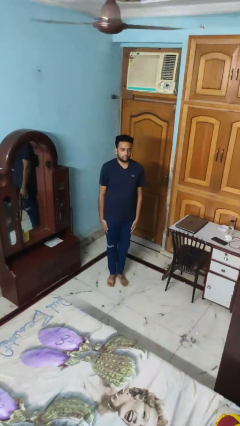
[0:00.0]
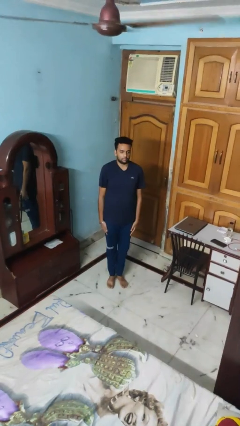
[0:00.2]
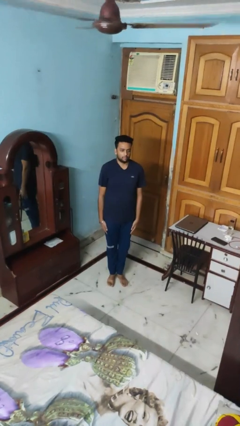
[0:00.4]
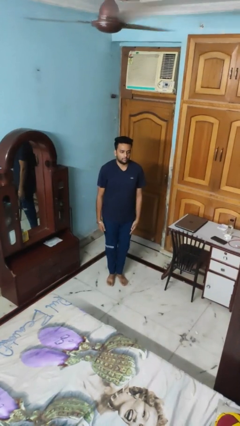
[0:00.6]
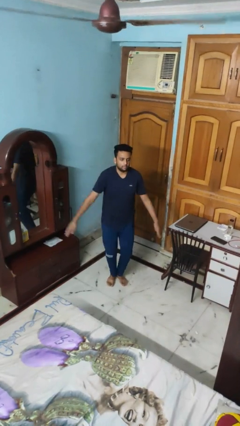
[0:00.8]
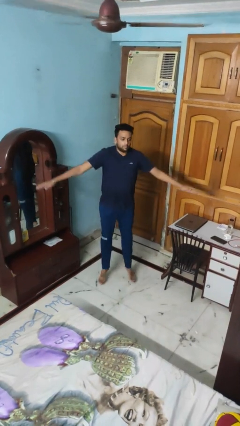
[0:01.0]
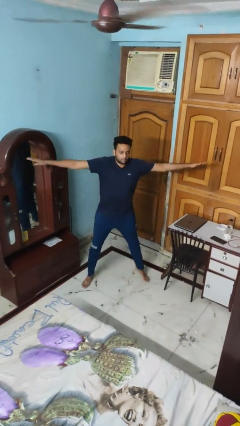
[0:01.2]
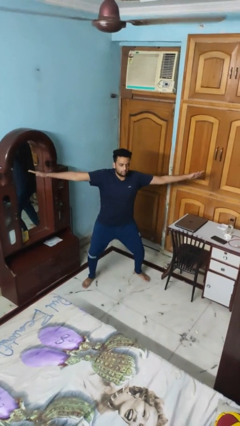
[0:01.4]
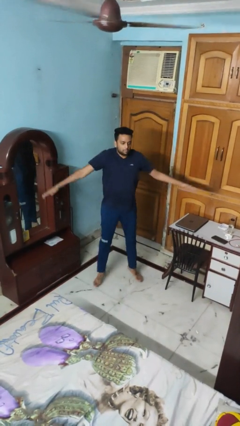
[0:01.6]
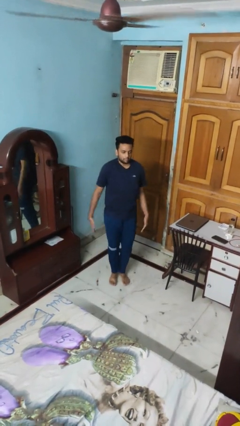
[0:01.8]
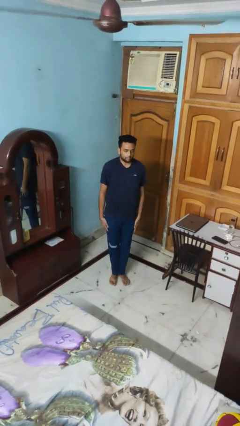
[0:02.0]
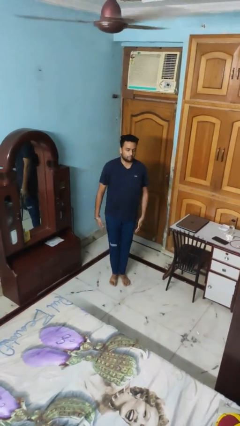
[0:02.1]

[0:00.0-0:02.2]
person exercises with jumping jacks

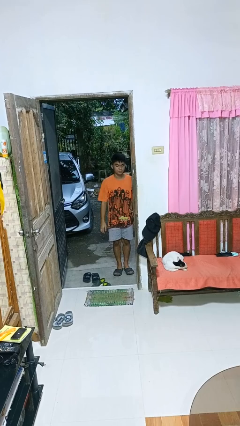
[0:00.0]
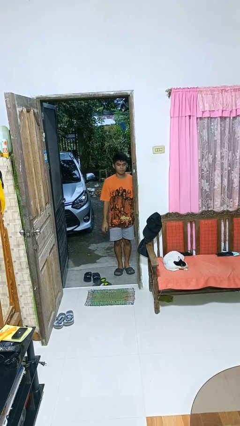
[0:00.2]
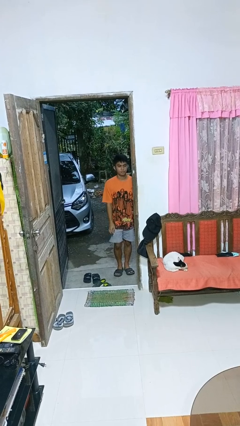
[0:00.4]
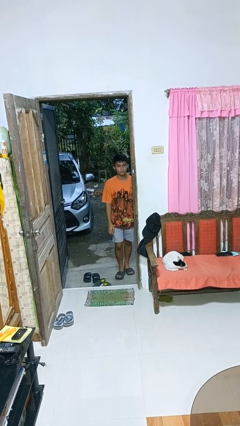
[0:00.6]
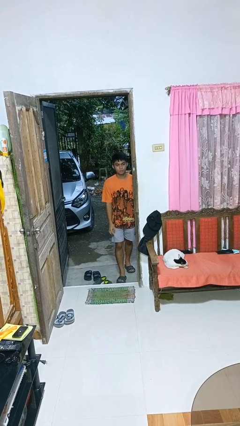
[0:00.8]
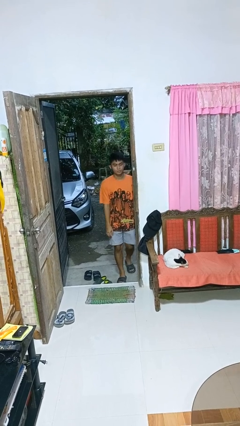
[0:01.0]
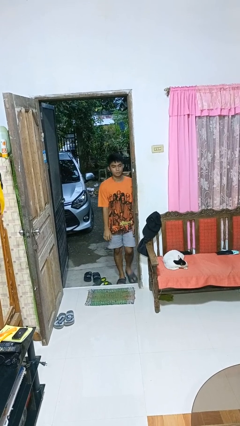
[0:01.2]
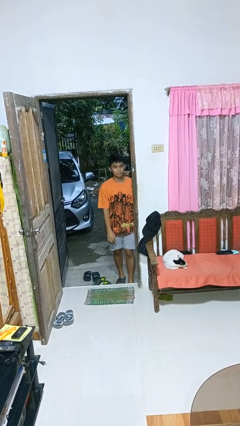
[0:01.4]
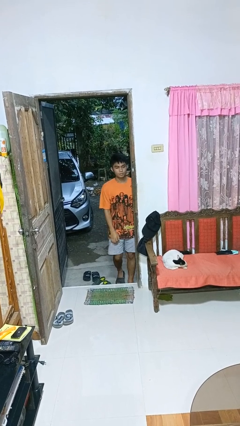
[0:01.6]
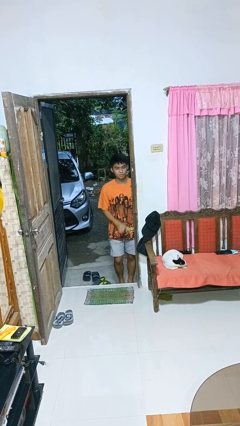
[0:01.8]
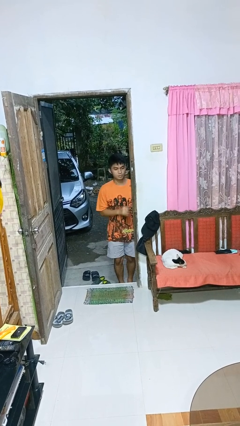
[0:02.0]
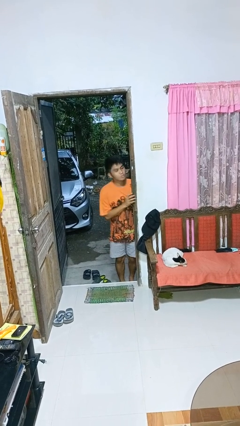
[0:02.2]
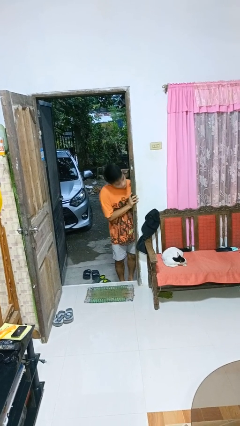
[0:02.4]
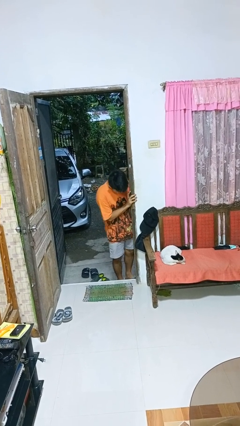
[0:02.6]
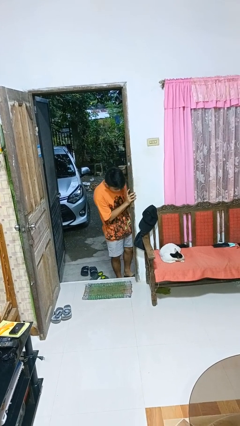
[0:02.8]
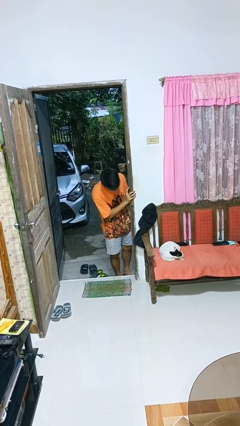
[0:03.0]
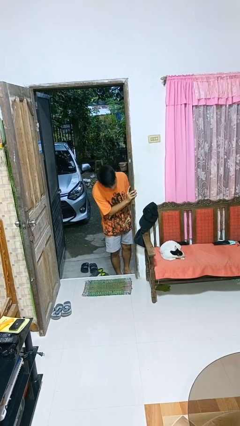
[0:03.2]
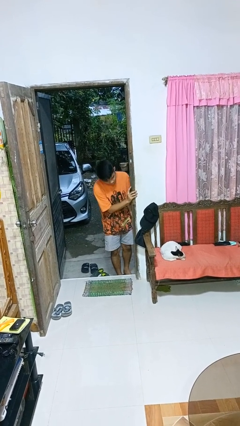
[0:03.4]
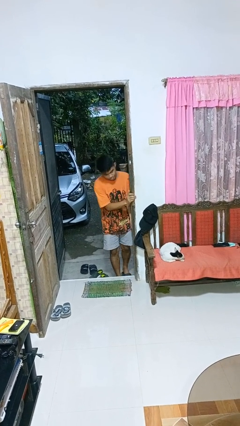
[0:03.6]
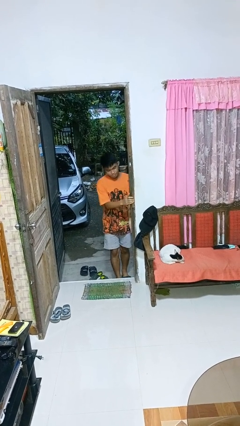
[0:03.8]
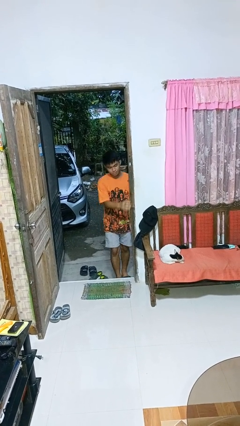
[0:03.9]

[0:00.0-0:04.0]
person bumps into wall

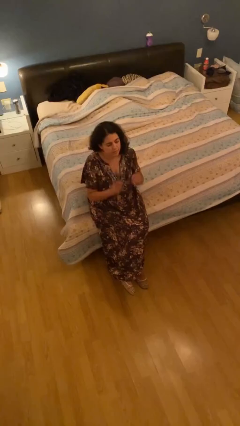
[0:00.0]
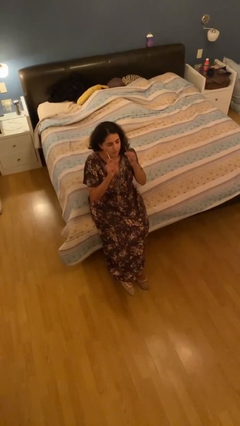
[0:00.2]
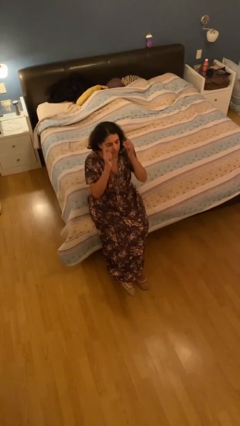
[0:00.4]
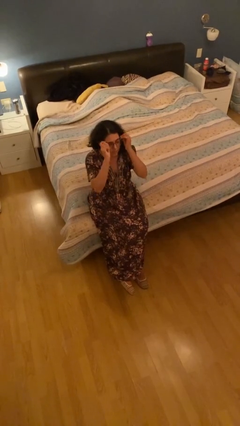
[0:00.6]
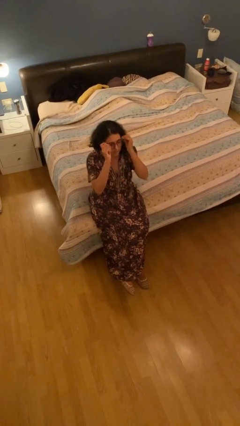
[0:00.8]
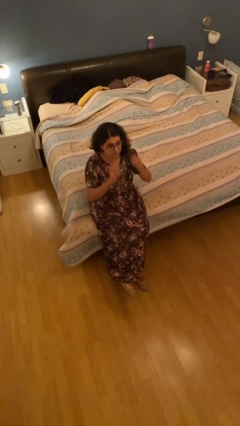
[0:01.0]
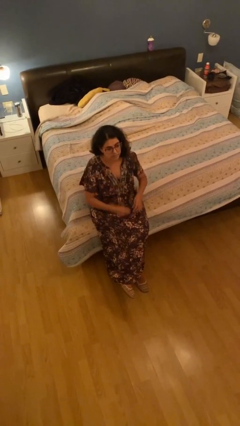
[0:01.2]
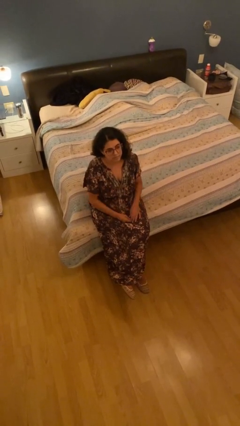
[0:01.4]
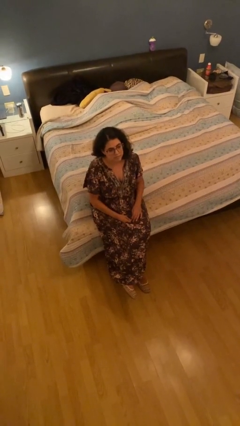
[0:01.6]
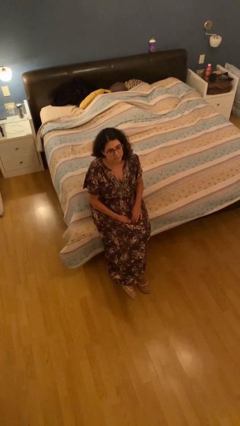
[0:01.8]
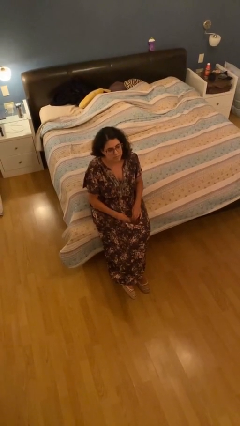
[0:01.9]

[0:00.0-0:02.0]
person puts on glasses

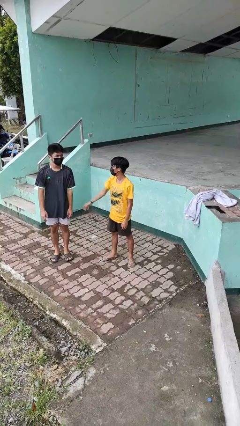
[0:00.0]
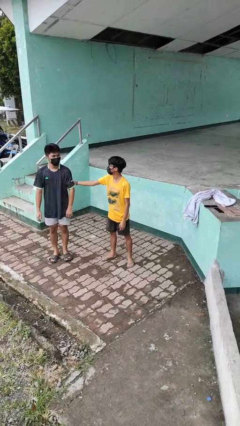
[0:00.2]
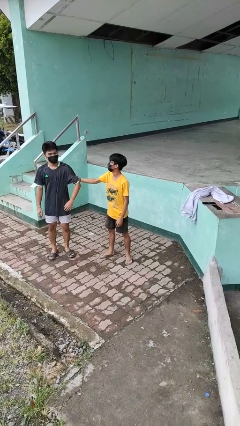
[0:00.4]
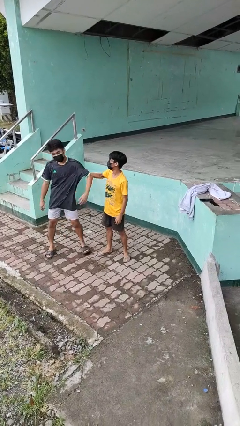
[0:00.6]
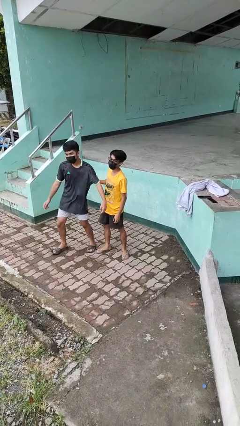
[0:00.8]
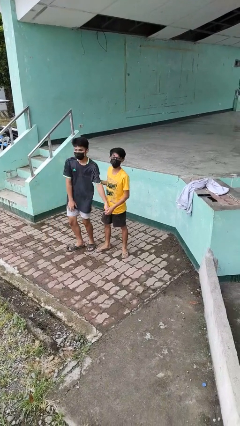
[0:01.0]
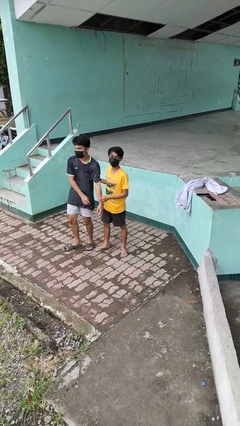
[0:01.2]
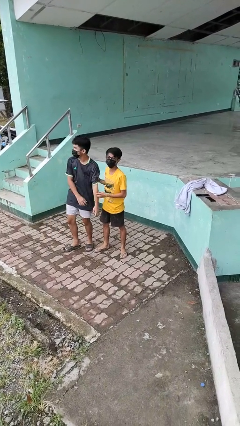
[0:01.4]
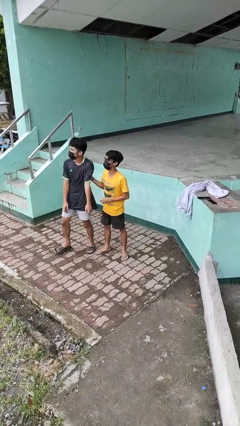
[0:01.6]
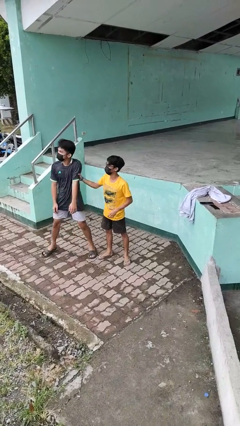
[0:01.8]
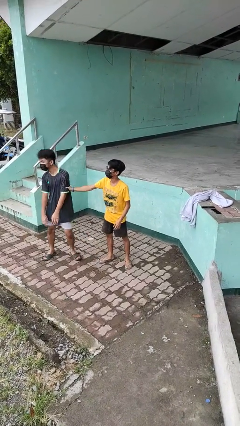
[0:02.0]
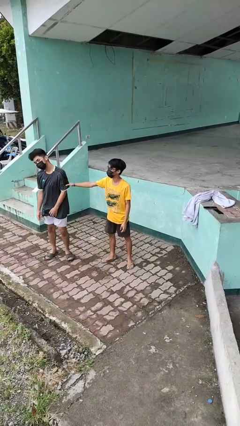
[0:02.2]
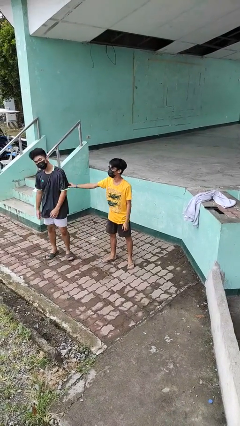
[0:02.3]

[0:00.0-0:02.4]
person grabs person by bicep

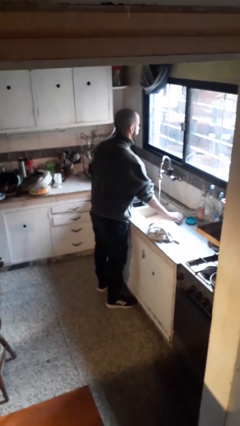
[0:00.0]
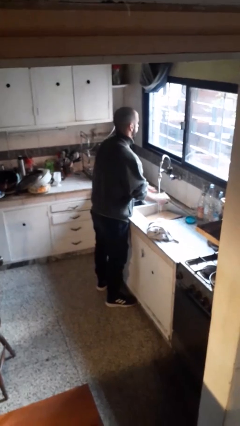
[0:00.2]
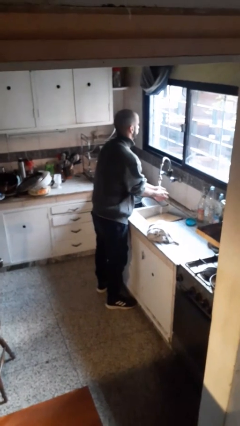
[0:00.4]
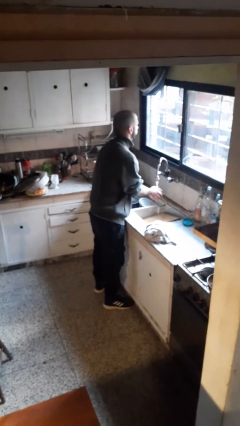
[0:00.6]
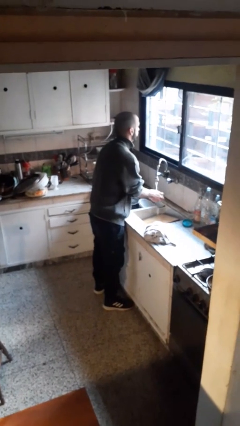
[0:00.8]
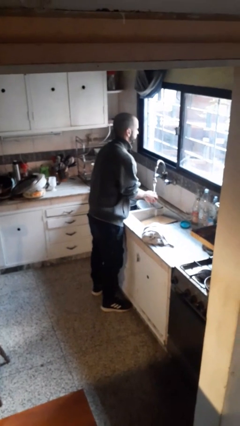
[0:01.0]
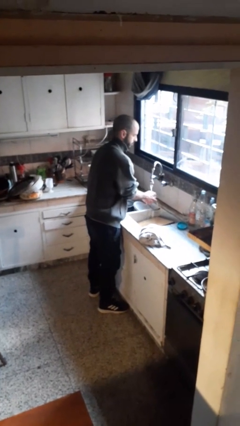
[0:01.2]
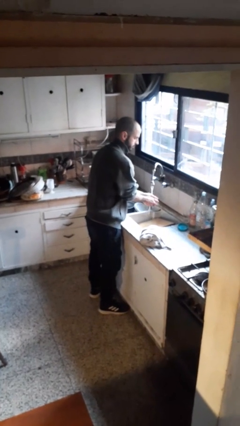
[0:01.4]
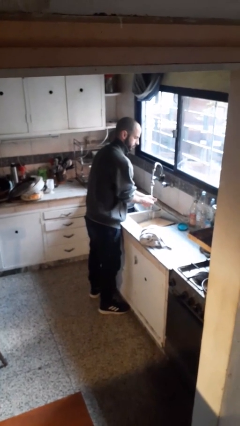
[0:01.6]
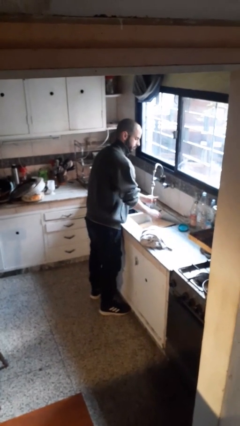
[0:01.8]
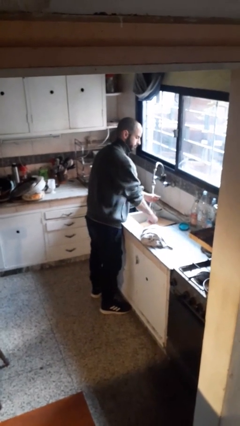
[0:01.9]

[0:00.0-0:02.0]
person washes hands

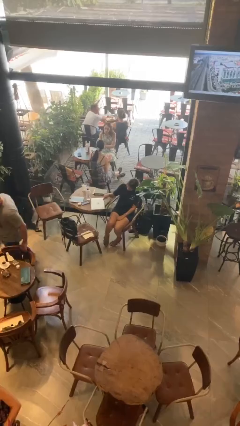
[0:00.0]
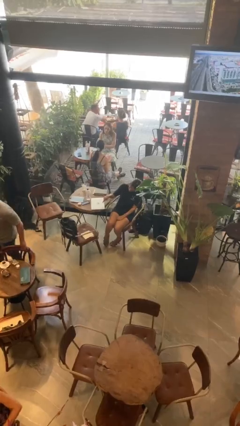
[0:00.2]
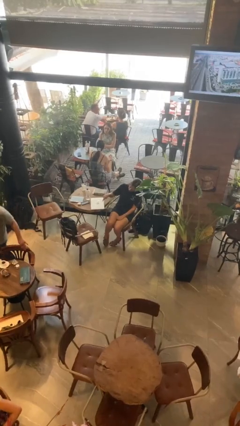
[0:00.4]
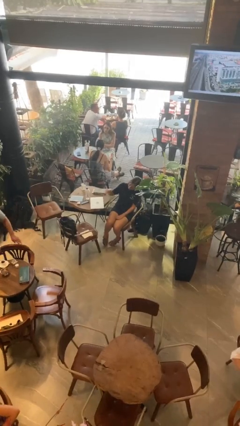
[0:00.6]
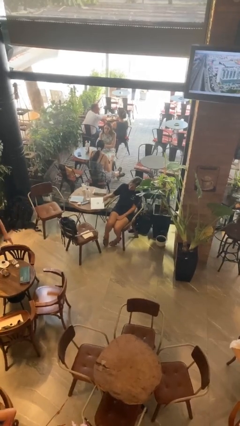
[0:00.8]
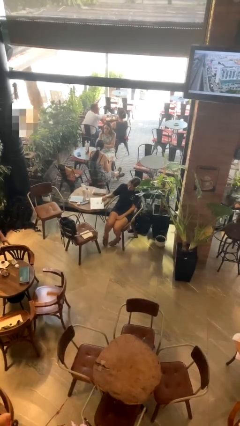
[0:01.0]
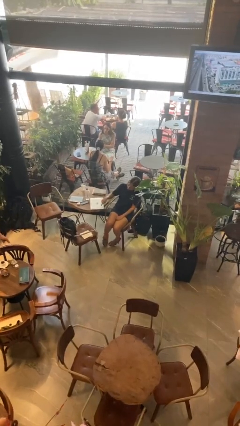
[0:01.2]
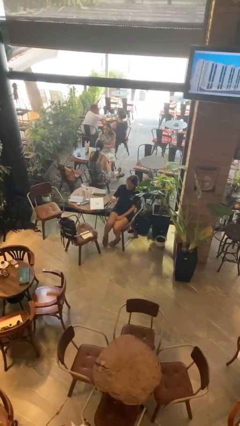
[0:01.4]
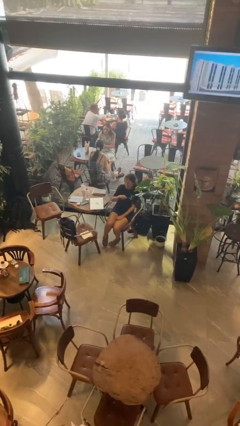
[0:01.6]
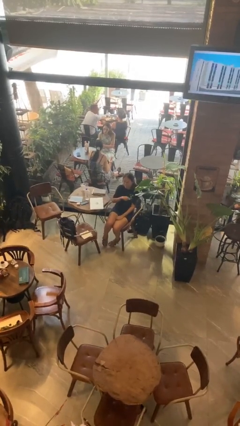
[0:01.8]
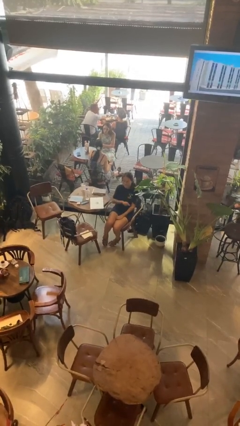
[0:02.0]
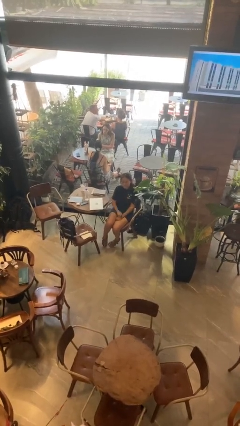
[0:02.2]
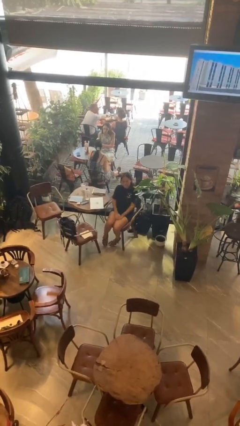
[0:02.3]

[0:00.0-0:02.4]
person taps object with finger

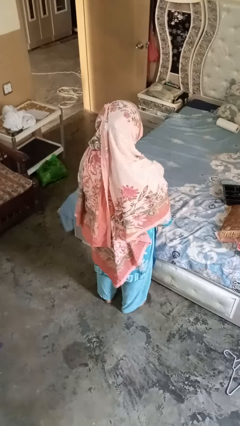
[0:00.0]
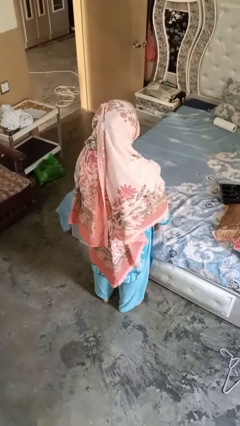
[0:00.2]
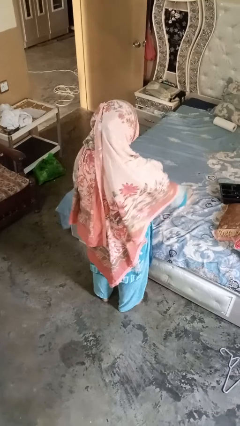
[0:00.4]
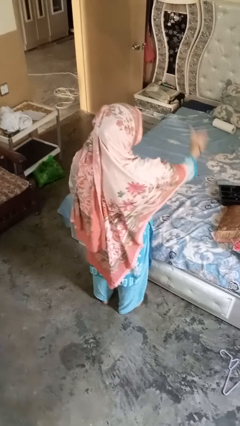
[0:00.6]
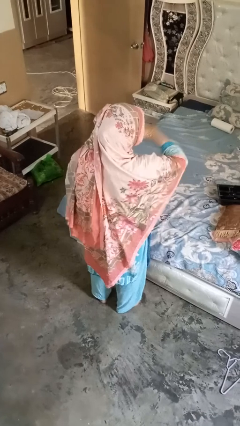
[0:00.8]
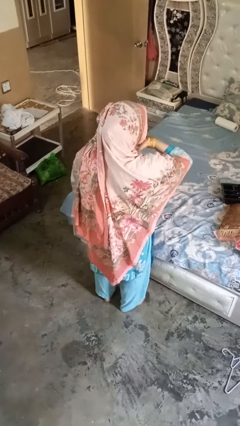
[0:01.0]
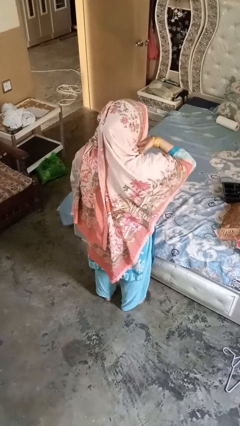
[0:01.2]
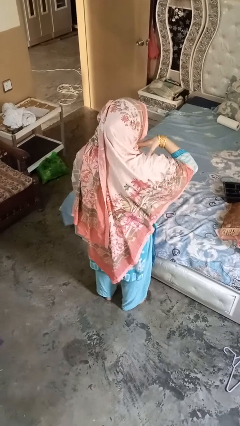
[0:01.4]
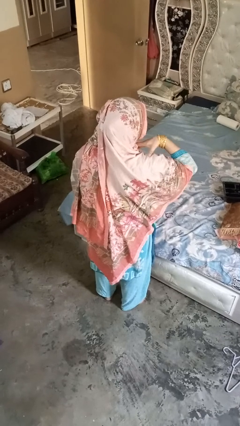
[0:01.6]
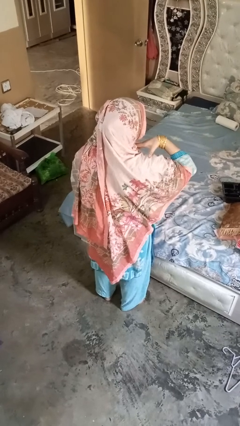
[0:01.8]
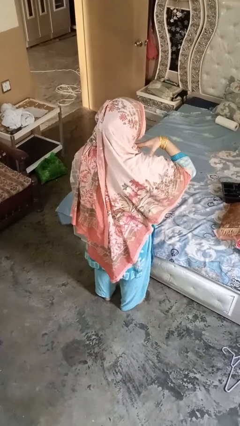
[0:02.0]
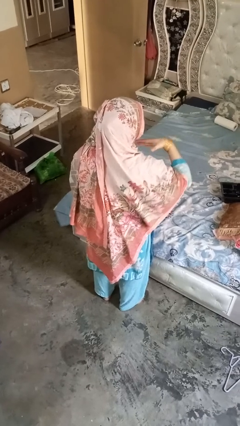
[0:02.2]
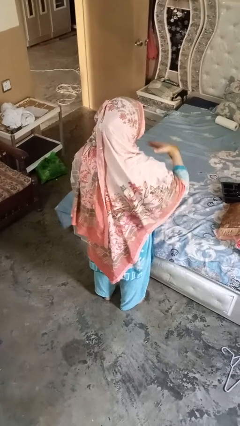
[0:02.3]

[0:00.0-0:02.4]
person gestures cut
